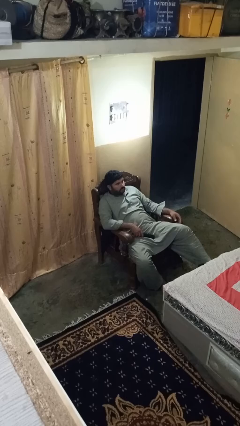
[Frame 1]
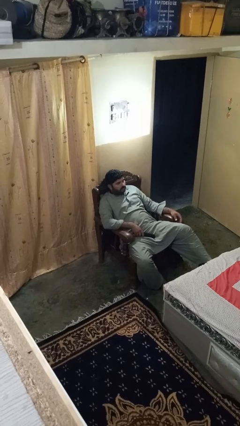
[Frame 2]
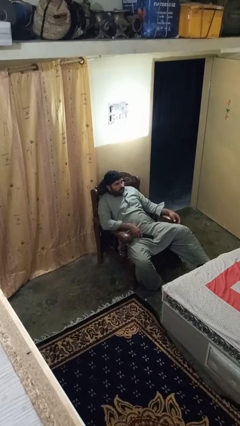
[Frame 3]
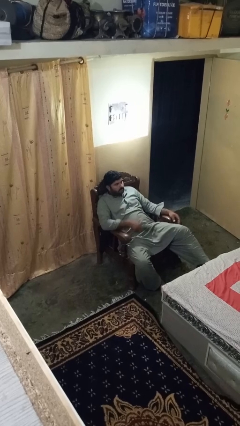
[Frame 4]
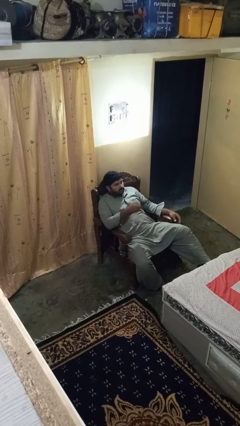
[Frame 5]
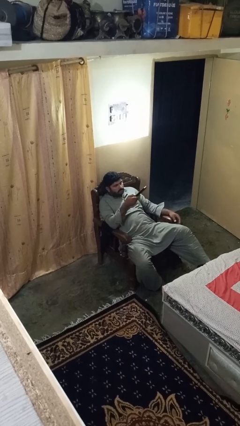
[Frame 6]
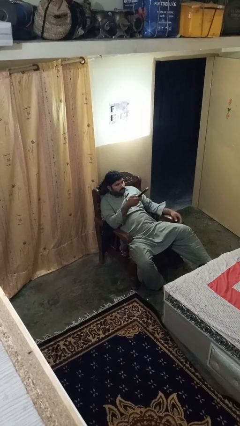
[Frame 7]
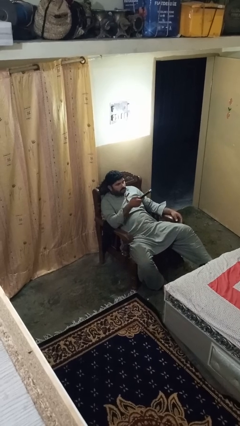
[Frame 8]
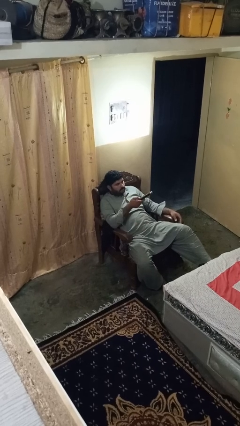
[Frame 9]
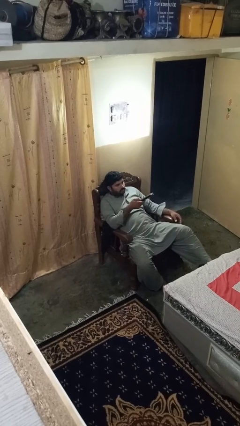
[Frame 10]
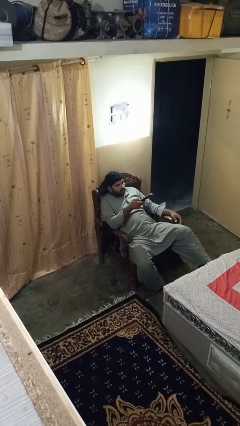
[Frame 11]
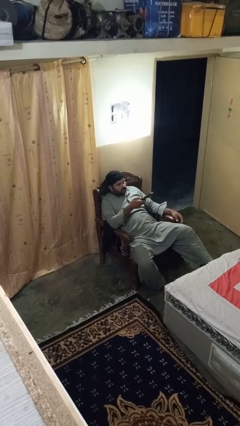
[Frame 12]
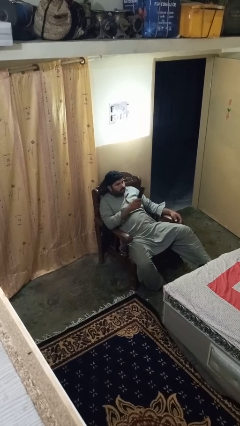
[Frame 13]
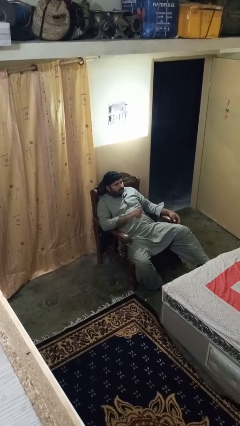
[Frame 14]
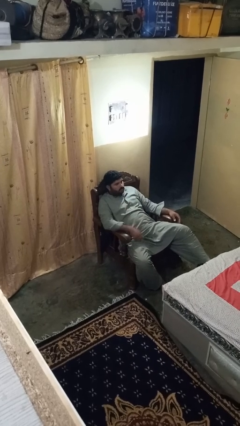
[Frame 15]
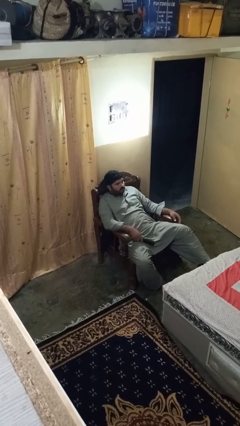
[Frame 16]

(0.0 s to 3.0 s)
person uses television remote

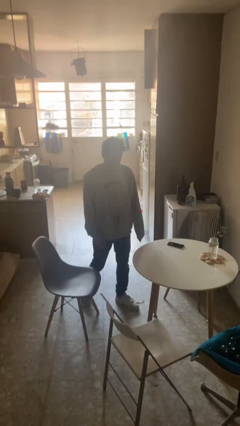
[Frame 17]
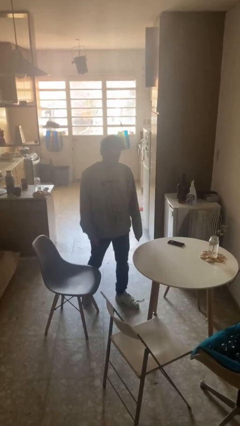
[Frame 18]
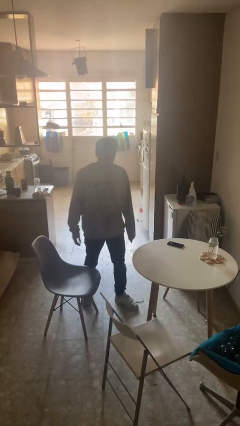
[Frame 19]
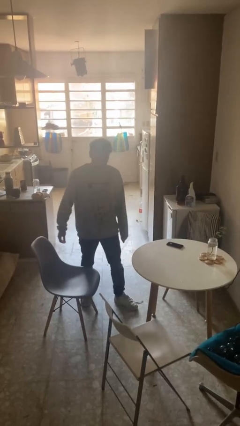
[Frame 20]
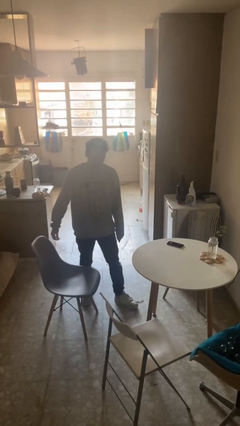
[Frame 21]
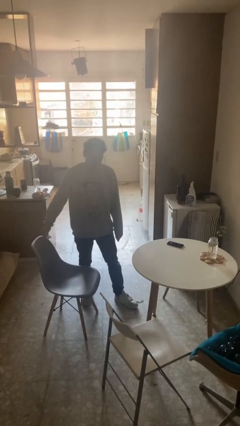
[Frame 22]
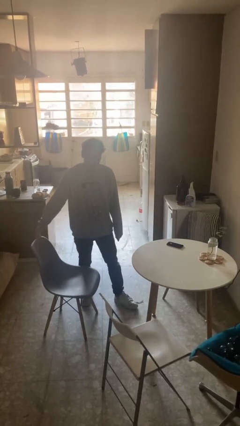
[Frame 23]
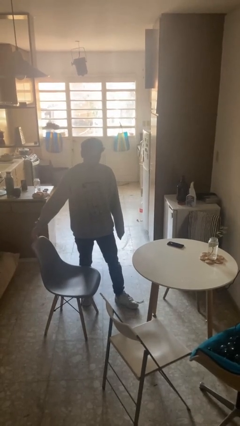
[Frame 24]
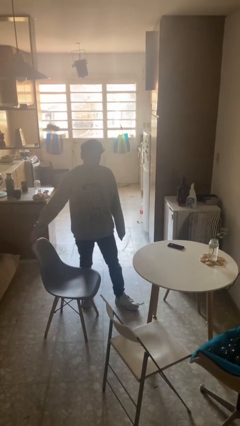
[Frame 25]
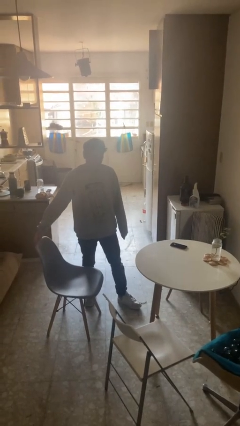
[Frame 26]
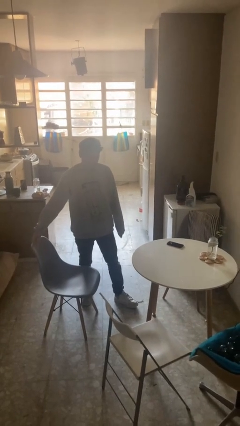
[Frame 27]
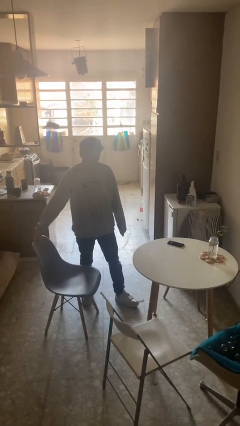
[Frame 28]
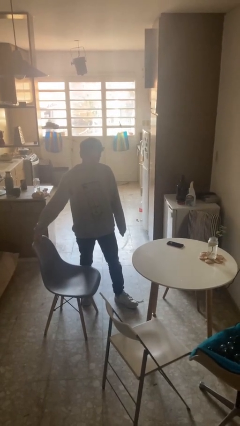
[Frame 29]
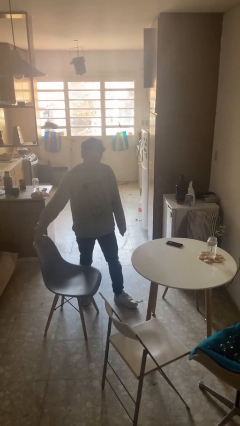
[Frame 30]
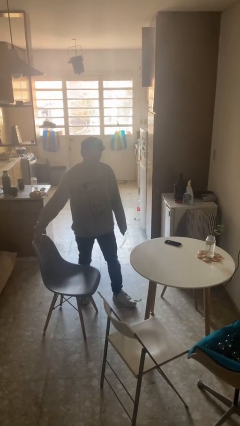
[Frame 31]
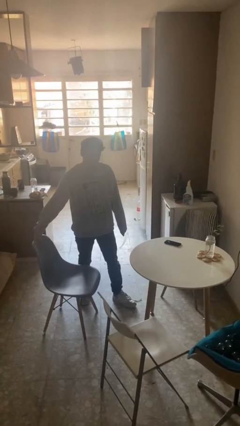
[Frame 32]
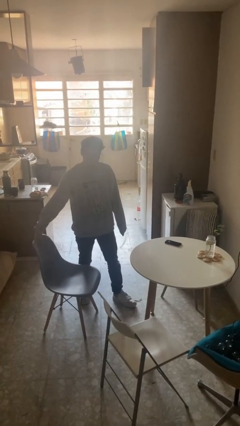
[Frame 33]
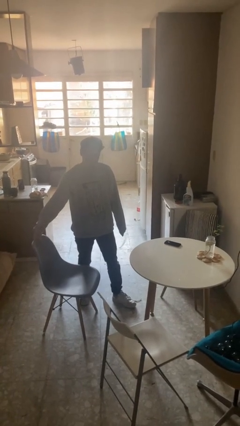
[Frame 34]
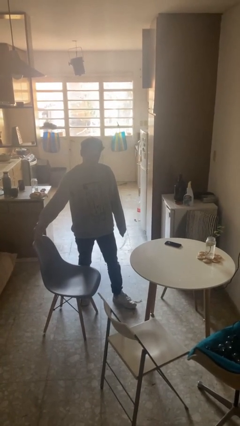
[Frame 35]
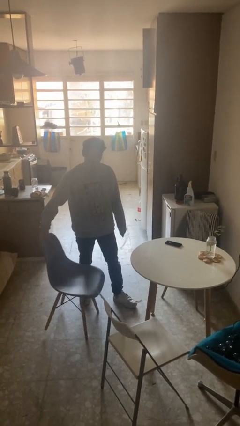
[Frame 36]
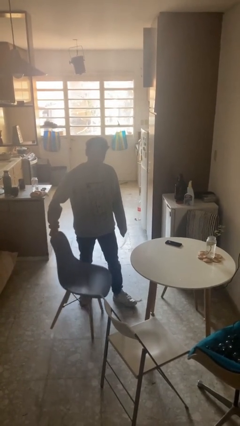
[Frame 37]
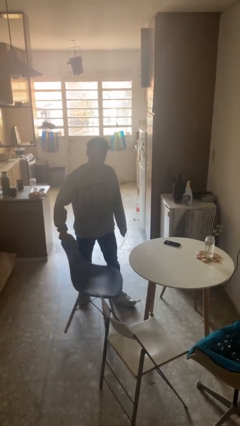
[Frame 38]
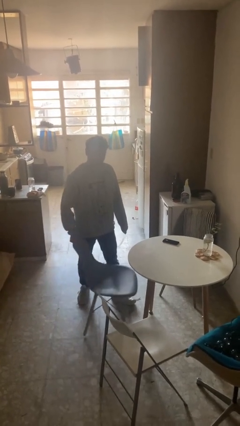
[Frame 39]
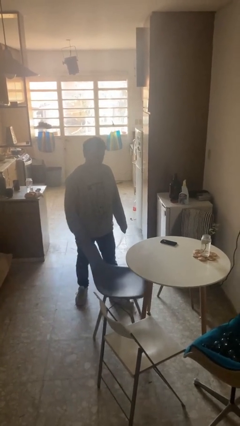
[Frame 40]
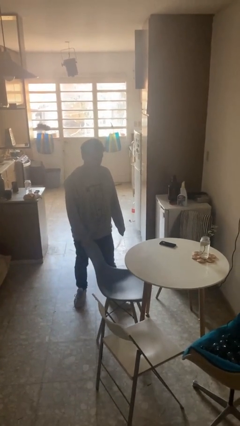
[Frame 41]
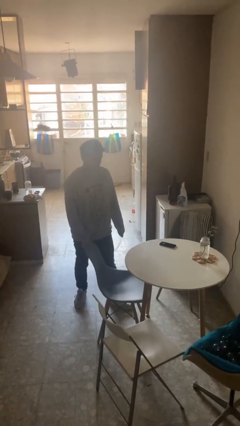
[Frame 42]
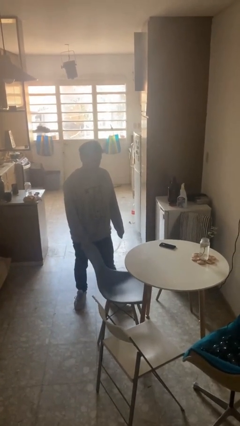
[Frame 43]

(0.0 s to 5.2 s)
person pushes in chair

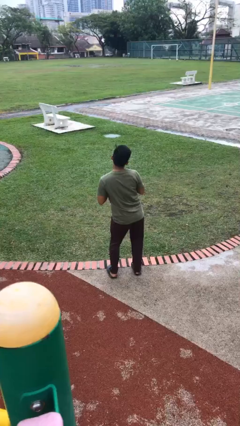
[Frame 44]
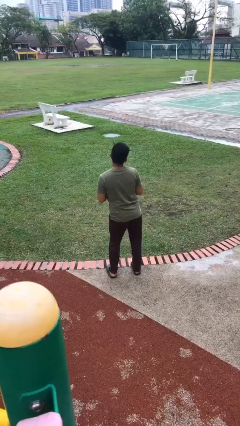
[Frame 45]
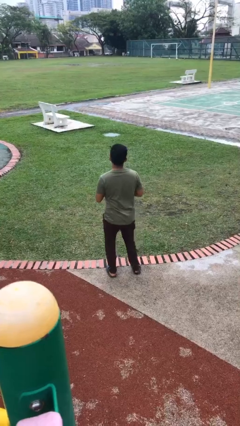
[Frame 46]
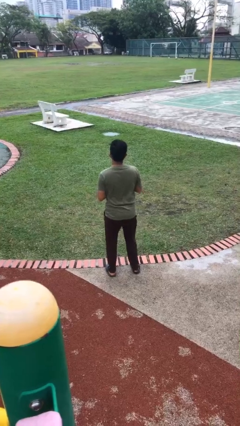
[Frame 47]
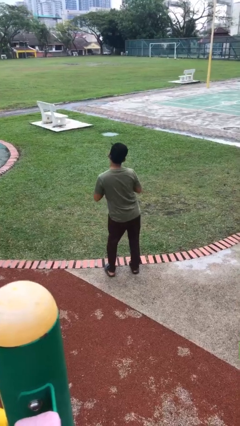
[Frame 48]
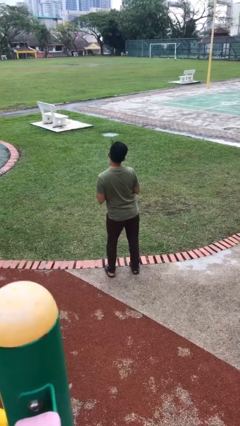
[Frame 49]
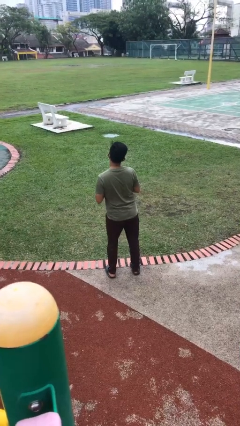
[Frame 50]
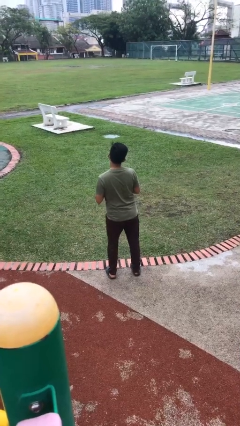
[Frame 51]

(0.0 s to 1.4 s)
person wiggles hips

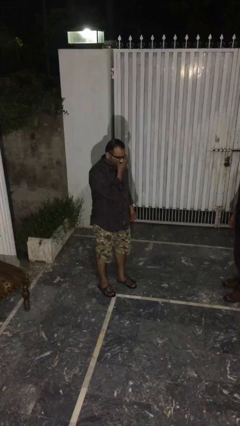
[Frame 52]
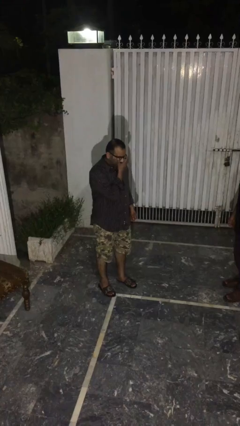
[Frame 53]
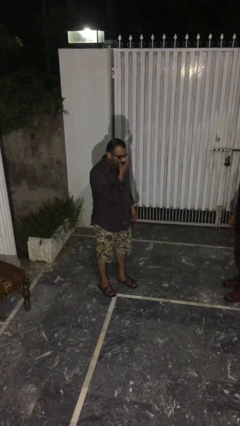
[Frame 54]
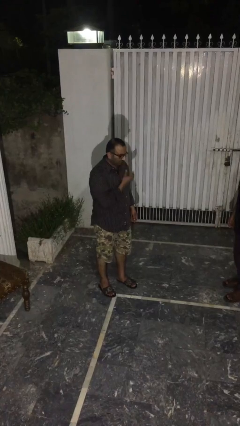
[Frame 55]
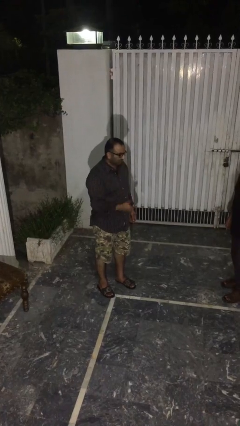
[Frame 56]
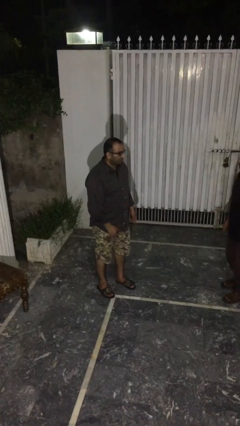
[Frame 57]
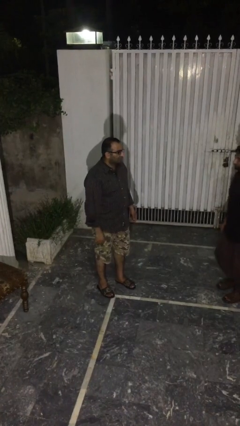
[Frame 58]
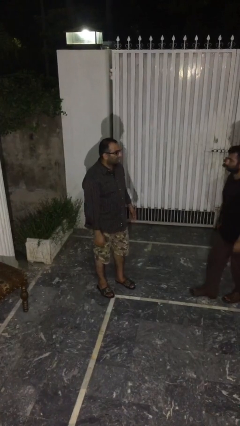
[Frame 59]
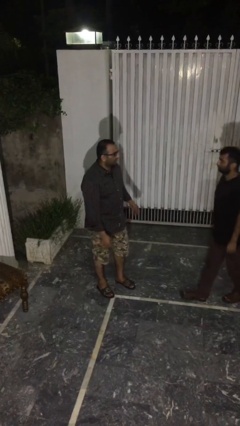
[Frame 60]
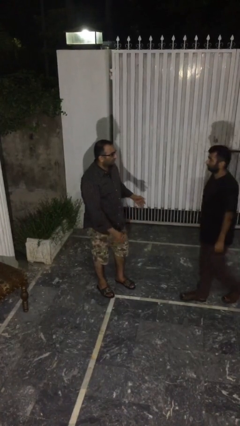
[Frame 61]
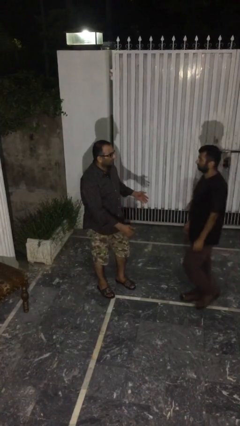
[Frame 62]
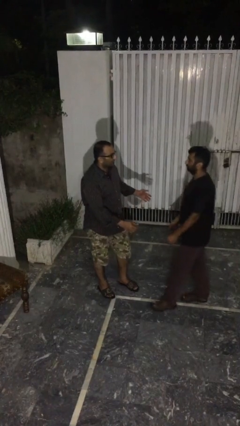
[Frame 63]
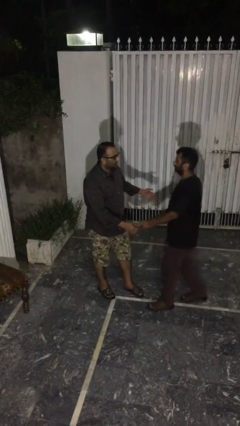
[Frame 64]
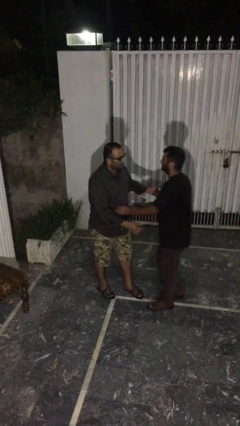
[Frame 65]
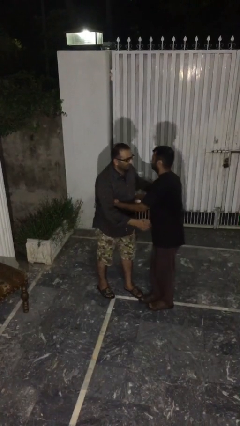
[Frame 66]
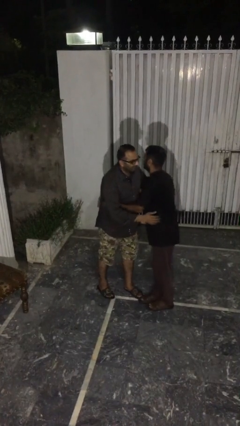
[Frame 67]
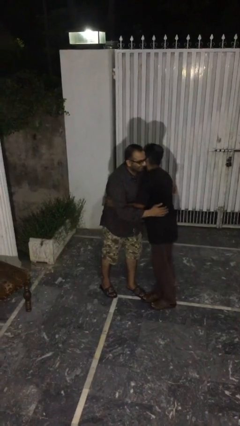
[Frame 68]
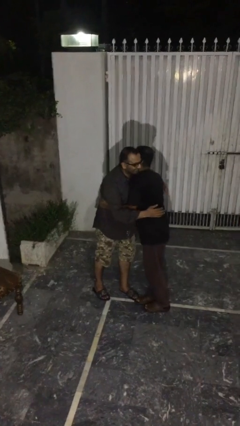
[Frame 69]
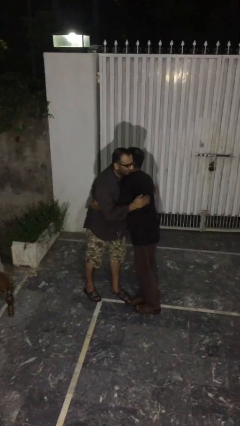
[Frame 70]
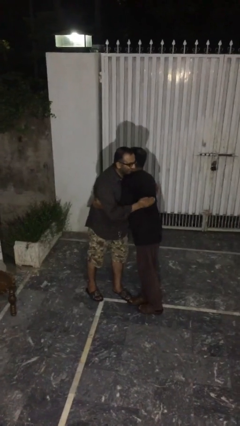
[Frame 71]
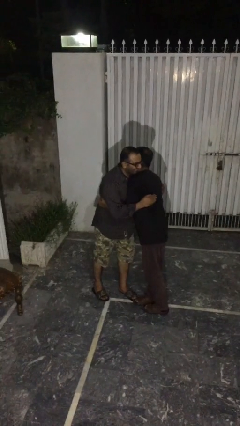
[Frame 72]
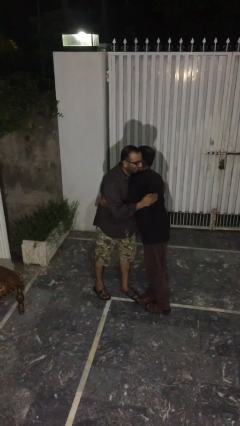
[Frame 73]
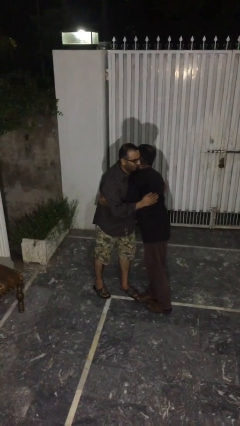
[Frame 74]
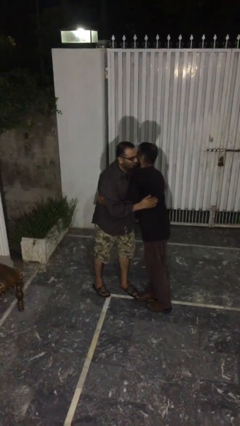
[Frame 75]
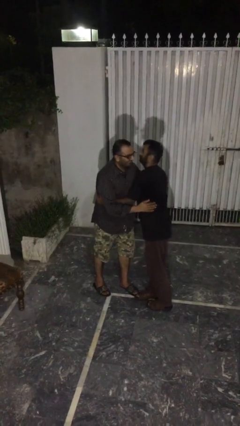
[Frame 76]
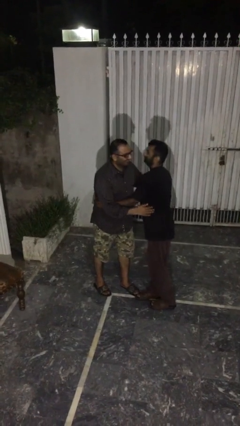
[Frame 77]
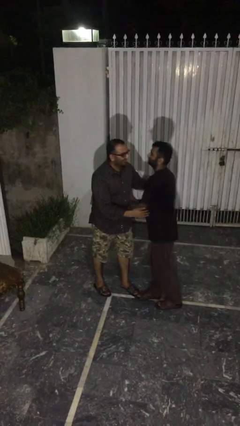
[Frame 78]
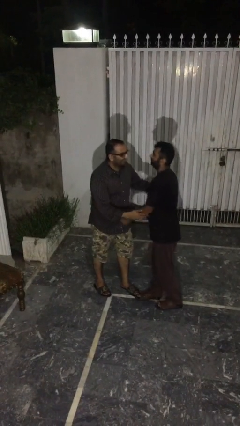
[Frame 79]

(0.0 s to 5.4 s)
person embraces person

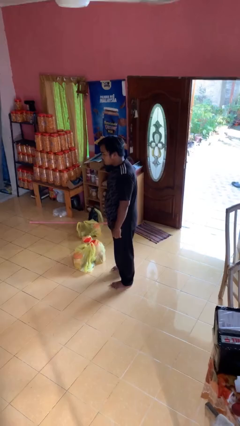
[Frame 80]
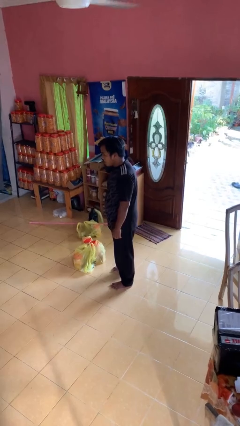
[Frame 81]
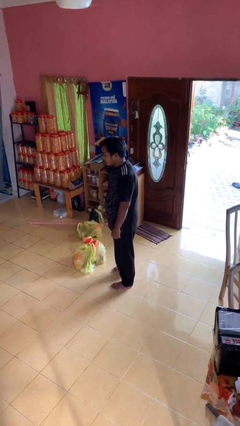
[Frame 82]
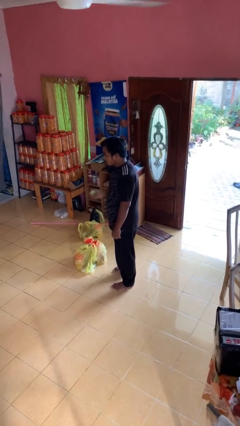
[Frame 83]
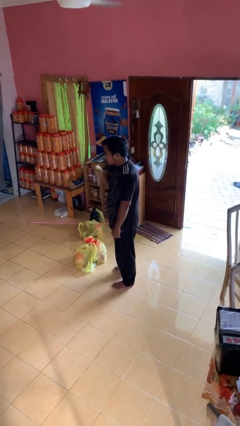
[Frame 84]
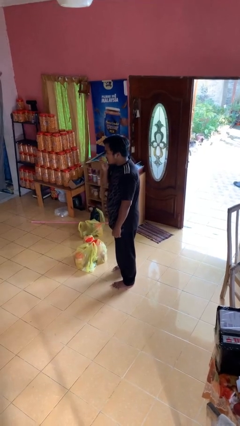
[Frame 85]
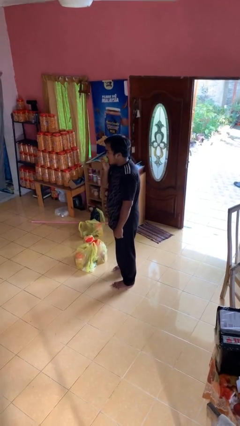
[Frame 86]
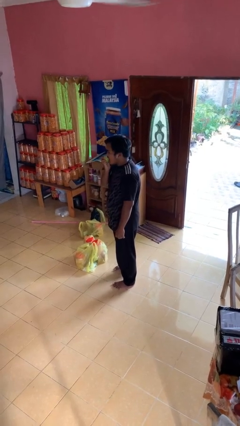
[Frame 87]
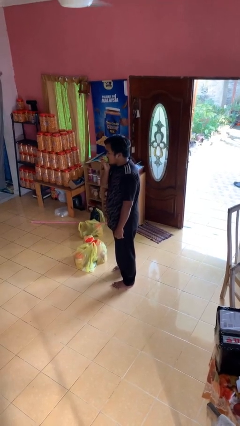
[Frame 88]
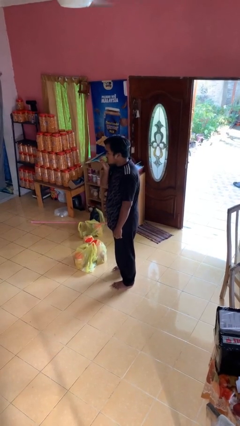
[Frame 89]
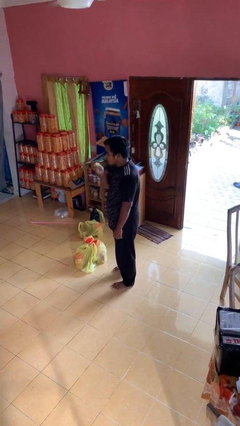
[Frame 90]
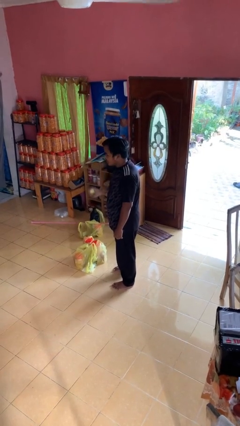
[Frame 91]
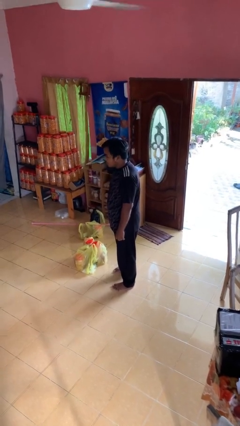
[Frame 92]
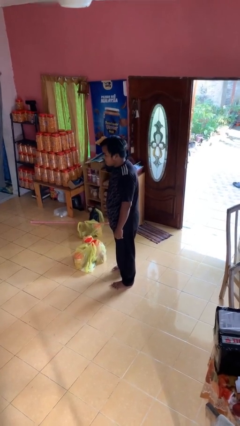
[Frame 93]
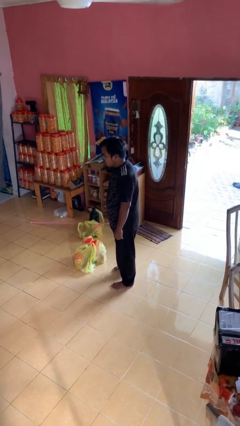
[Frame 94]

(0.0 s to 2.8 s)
person eats apple
